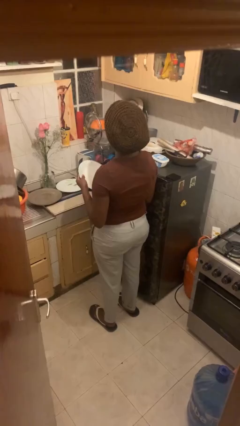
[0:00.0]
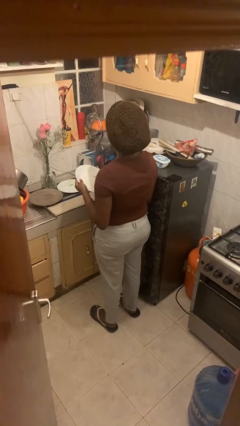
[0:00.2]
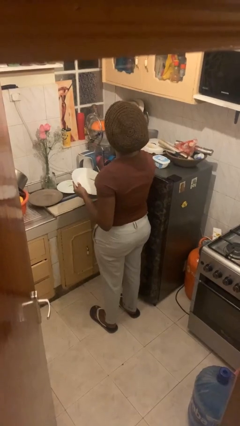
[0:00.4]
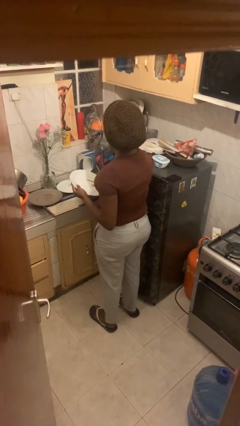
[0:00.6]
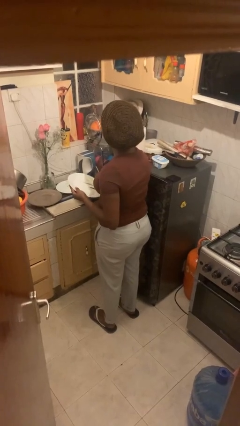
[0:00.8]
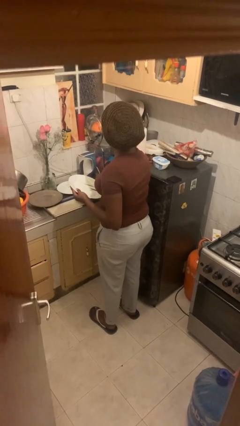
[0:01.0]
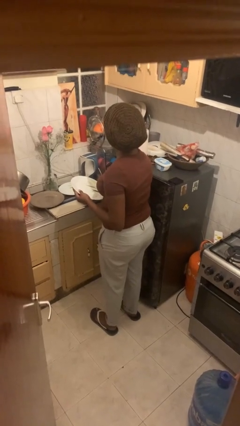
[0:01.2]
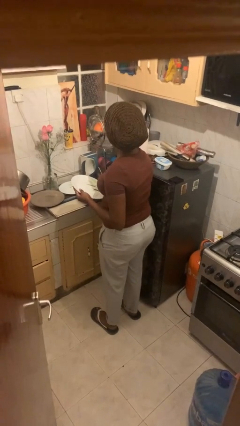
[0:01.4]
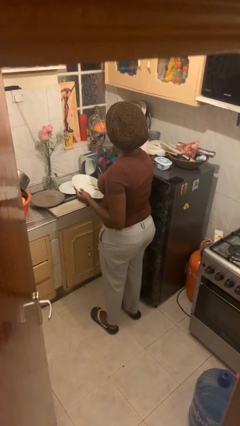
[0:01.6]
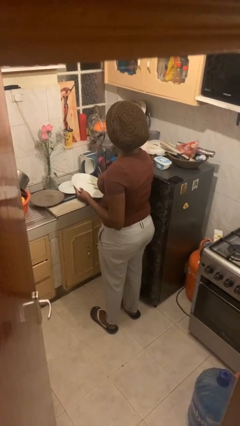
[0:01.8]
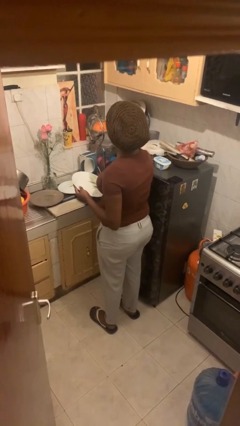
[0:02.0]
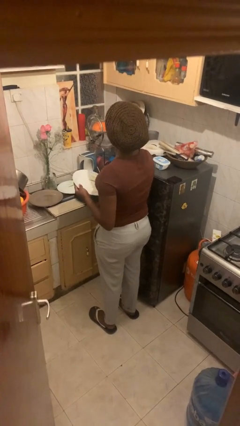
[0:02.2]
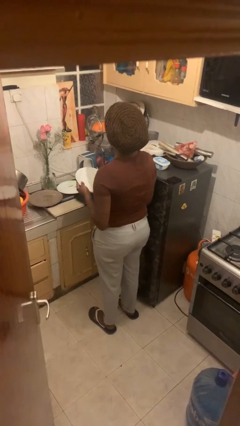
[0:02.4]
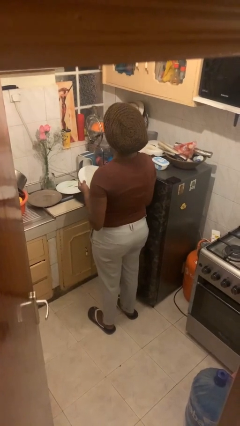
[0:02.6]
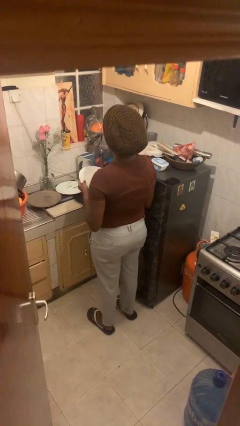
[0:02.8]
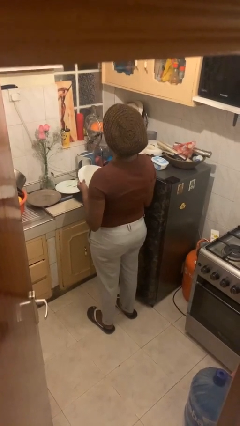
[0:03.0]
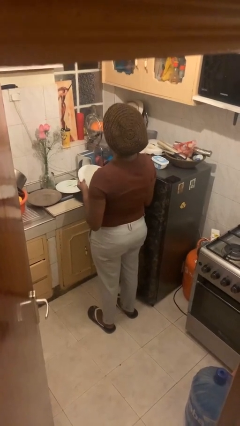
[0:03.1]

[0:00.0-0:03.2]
person sets table

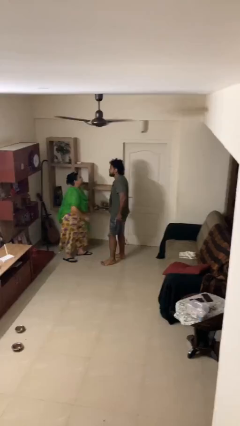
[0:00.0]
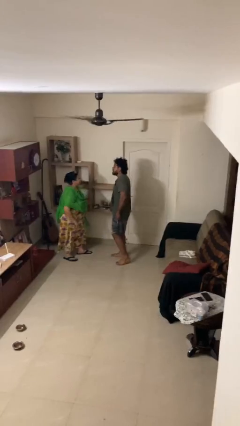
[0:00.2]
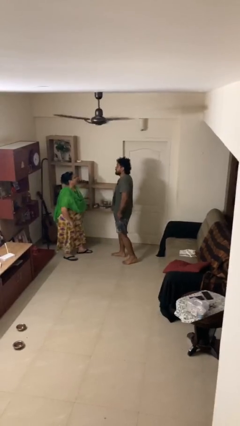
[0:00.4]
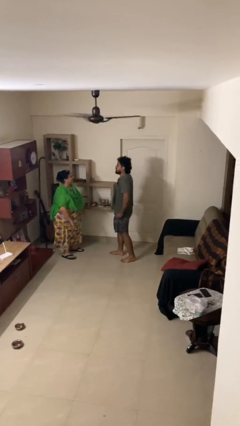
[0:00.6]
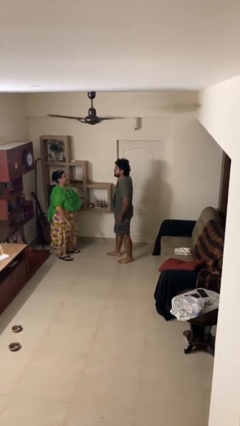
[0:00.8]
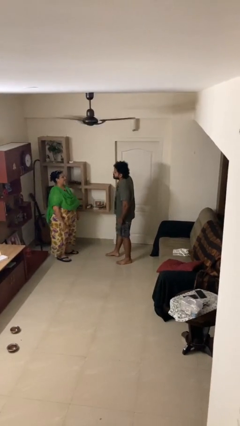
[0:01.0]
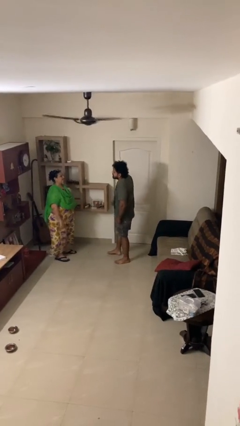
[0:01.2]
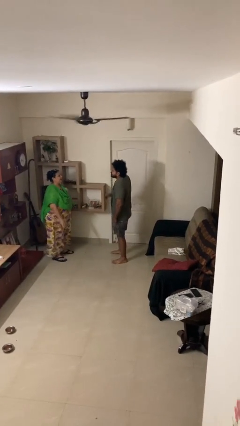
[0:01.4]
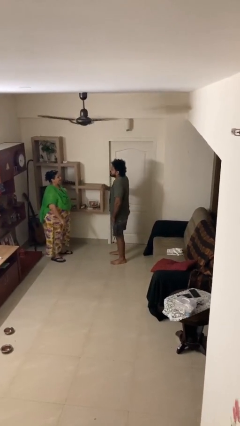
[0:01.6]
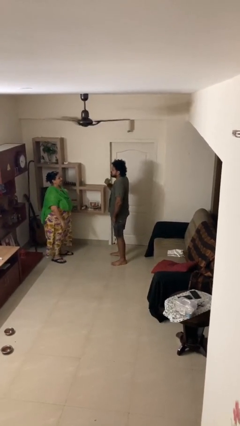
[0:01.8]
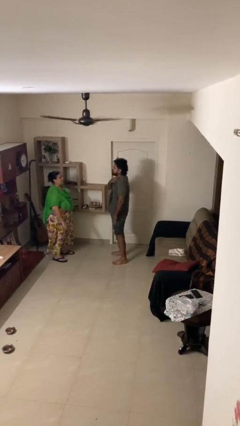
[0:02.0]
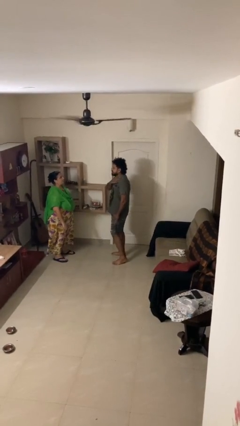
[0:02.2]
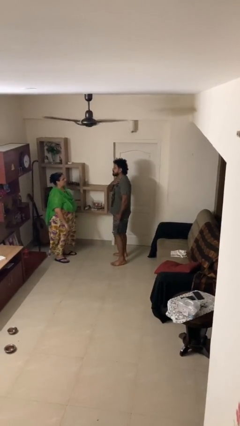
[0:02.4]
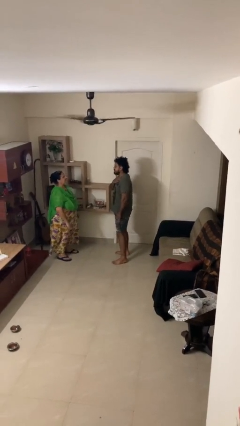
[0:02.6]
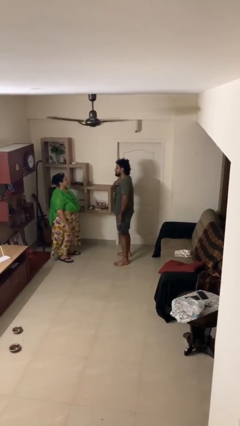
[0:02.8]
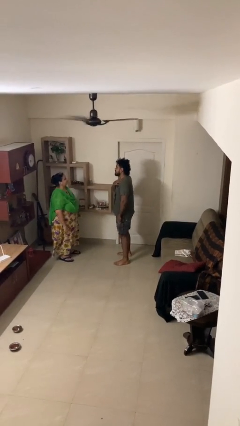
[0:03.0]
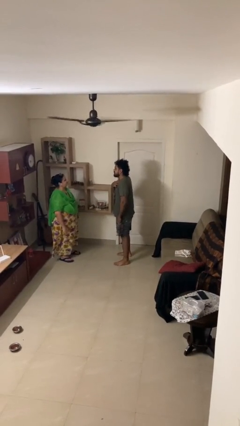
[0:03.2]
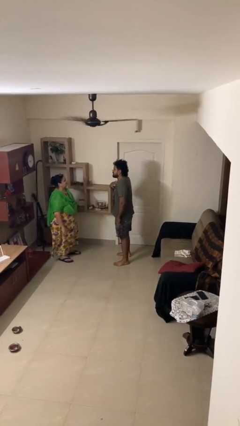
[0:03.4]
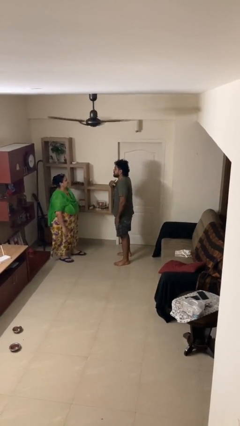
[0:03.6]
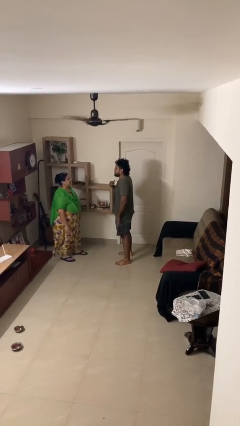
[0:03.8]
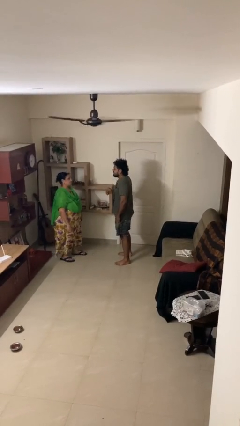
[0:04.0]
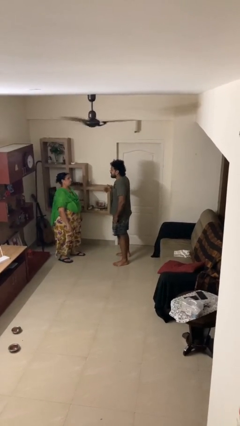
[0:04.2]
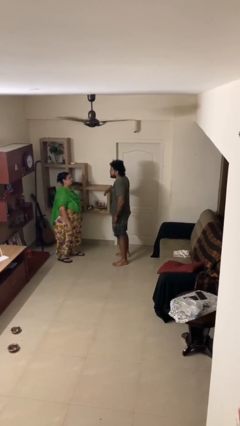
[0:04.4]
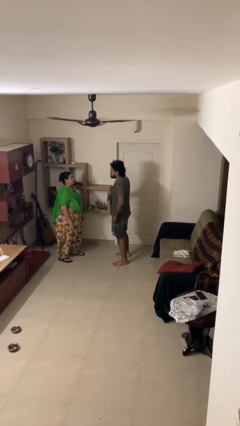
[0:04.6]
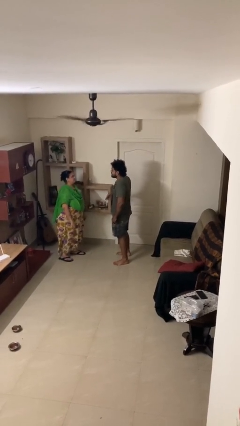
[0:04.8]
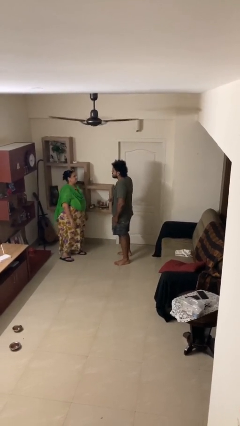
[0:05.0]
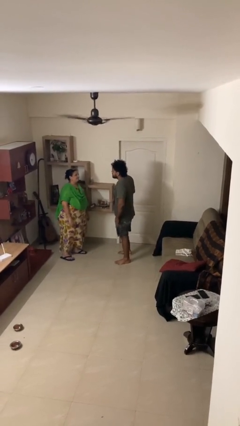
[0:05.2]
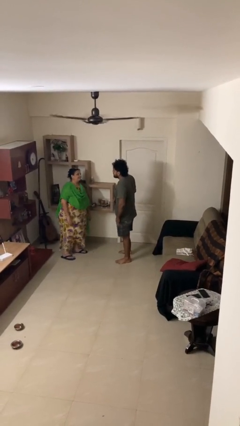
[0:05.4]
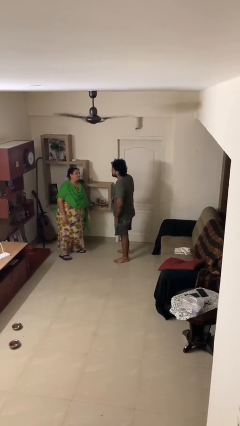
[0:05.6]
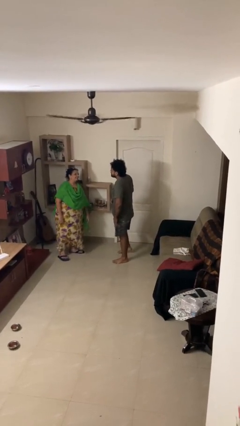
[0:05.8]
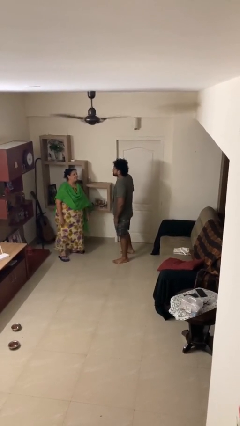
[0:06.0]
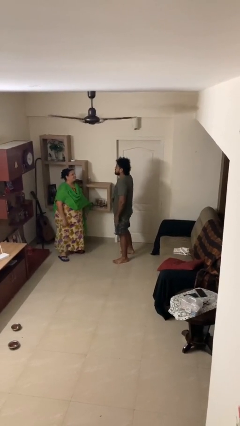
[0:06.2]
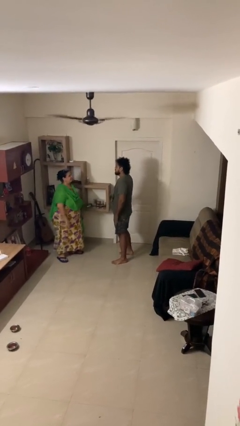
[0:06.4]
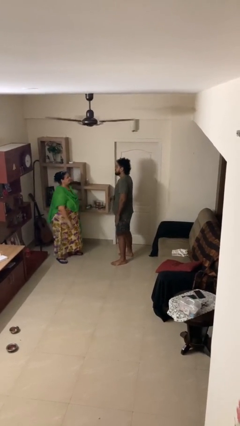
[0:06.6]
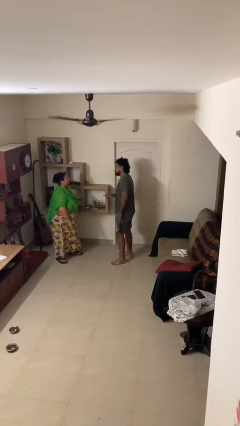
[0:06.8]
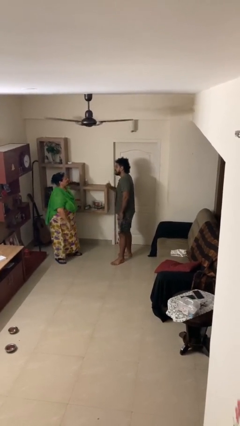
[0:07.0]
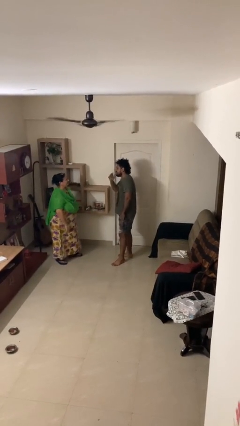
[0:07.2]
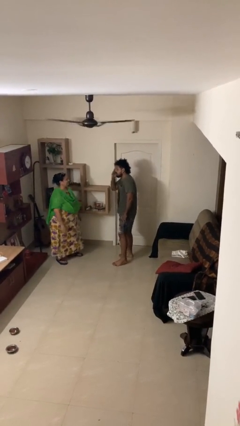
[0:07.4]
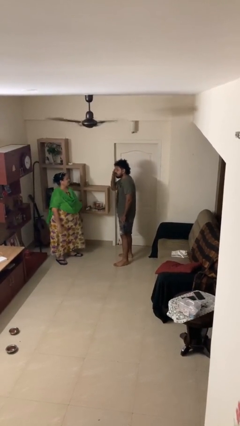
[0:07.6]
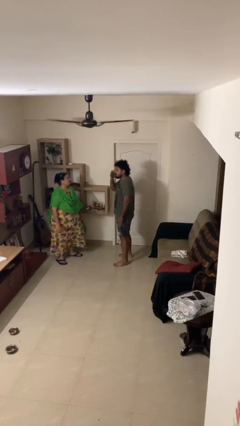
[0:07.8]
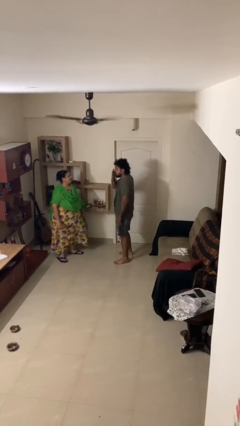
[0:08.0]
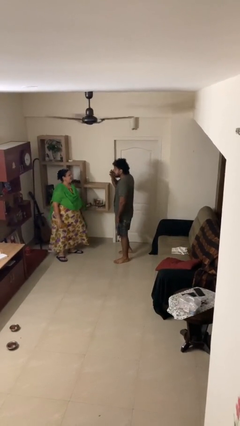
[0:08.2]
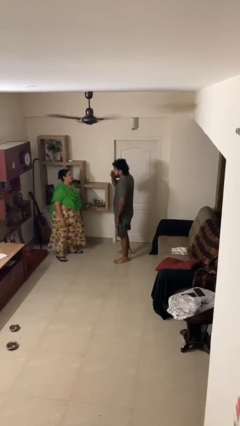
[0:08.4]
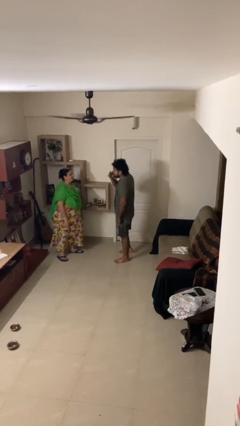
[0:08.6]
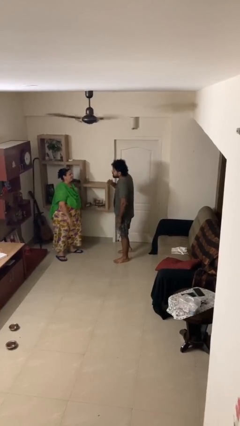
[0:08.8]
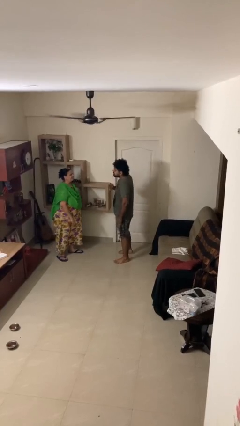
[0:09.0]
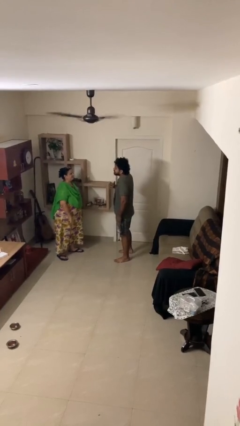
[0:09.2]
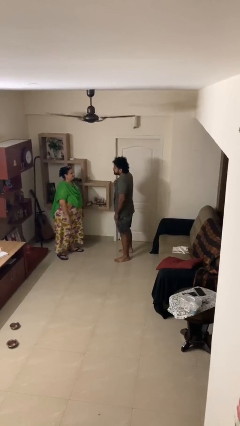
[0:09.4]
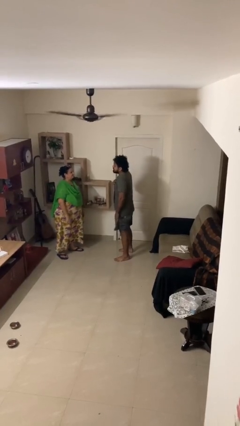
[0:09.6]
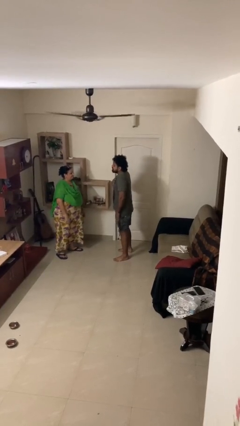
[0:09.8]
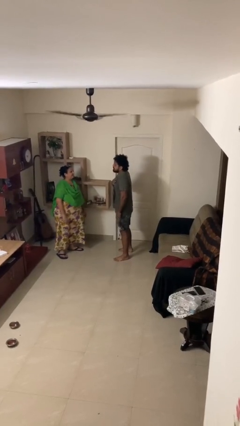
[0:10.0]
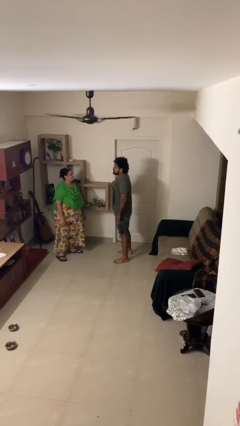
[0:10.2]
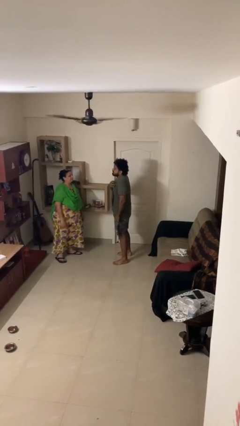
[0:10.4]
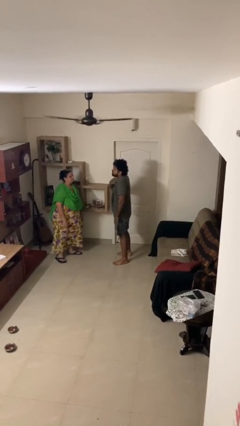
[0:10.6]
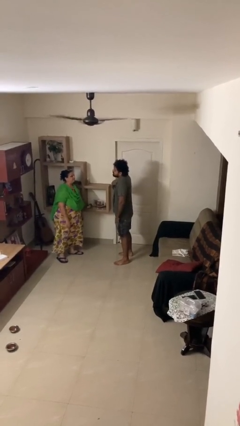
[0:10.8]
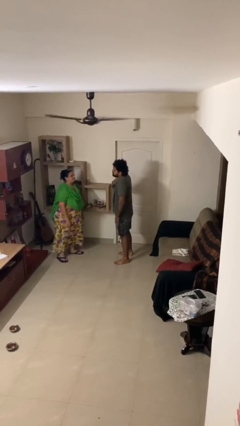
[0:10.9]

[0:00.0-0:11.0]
person talks to person

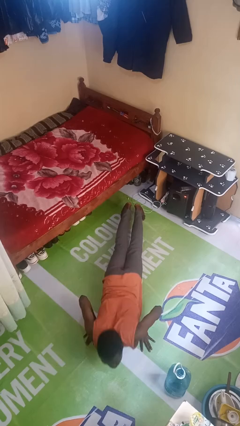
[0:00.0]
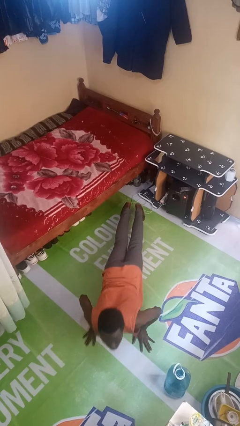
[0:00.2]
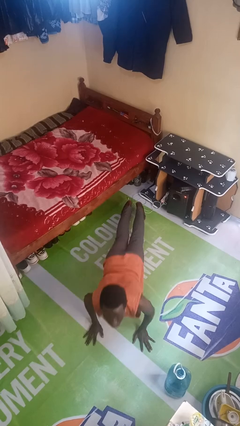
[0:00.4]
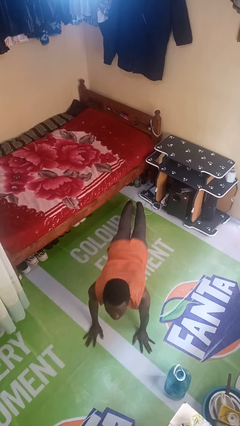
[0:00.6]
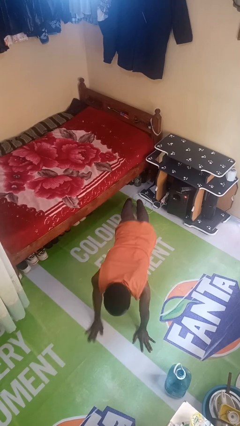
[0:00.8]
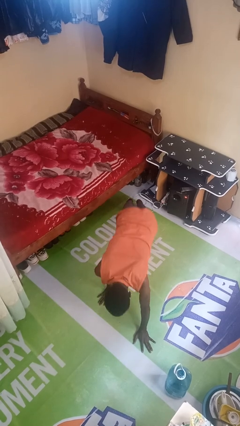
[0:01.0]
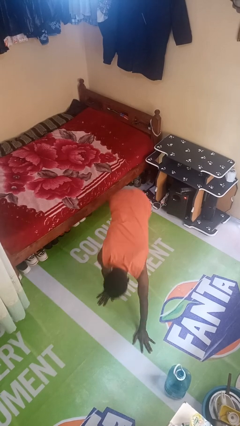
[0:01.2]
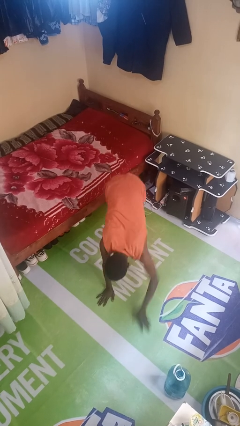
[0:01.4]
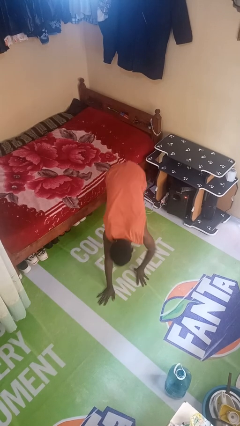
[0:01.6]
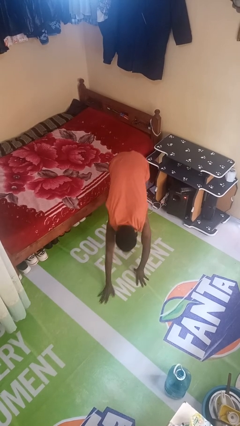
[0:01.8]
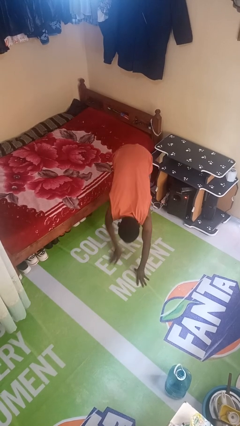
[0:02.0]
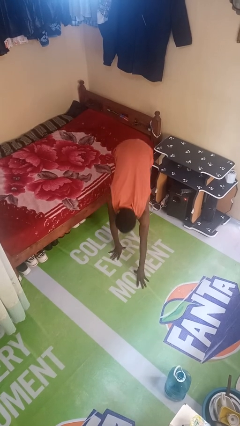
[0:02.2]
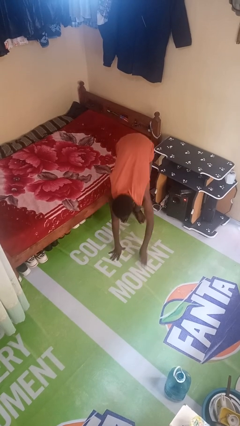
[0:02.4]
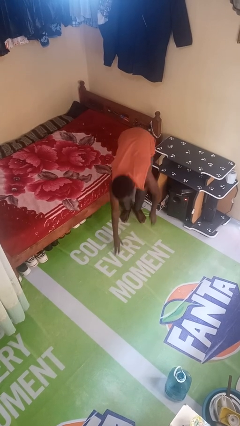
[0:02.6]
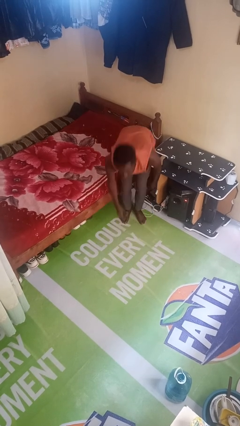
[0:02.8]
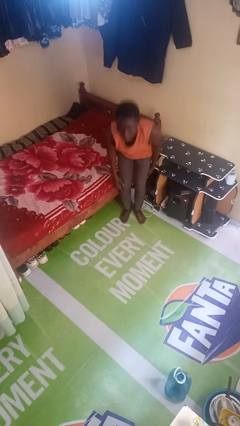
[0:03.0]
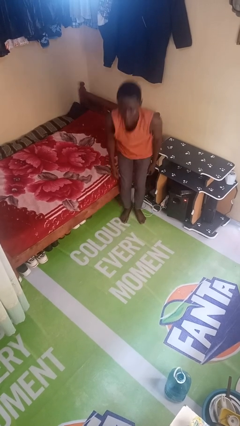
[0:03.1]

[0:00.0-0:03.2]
person stands up from floor

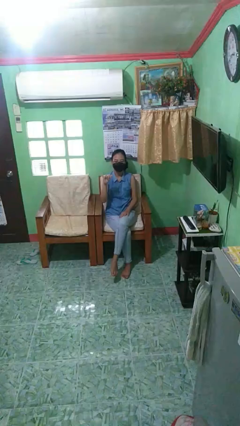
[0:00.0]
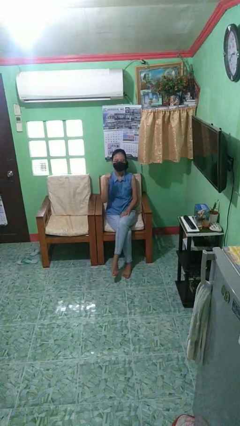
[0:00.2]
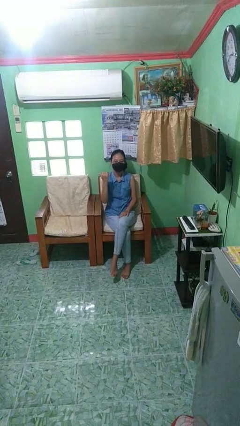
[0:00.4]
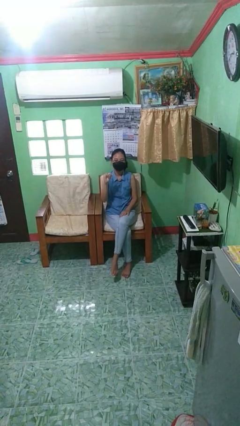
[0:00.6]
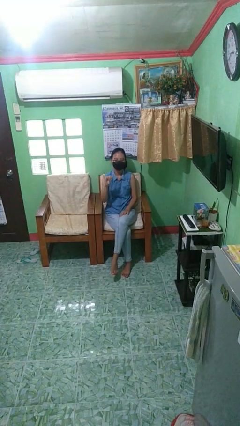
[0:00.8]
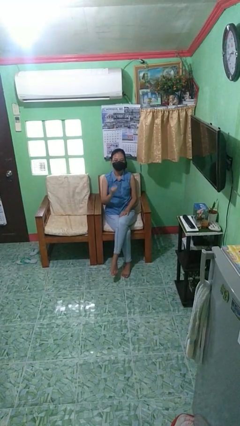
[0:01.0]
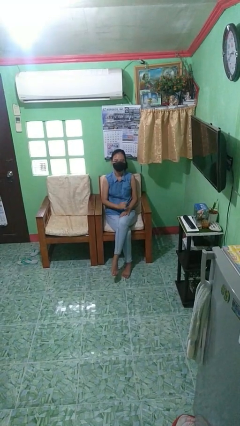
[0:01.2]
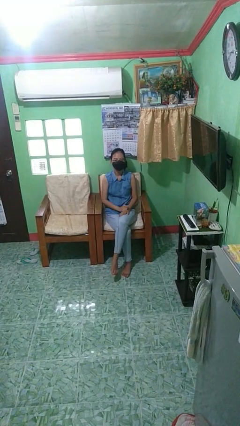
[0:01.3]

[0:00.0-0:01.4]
person gestures hang loose
